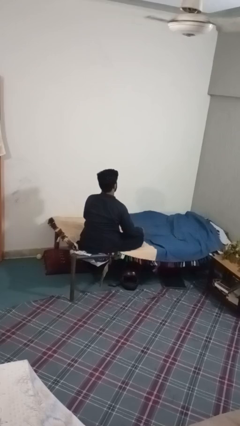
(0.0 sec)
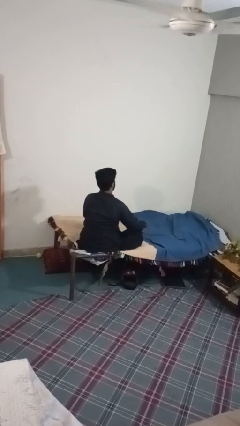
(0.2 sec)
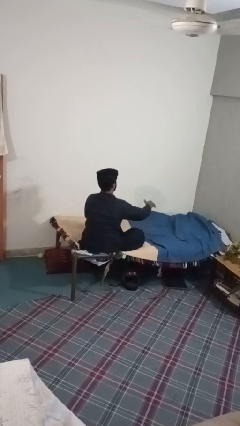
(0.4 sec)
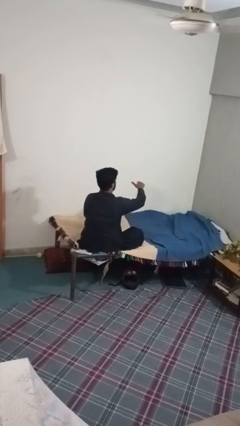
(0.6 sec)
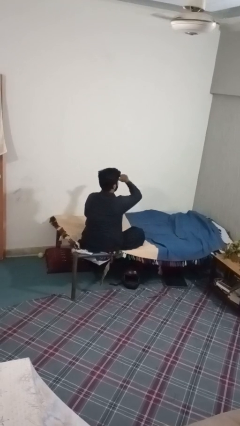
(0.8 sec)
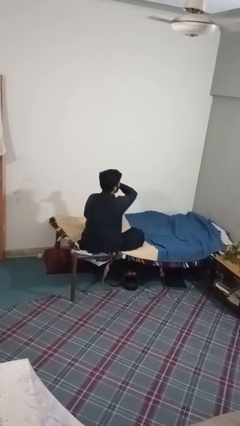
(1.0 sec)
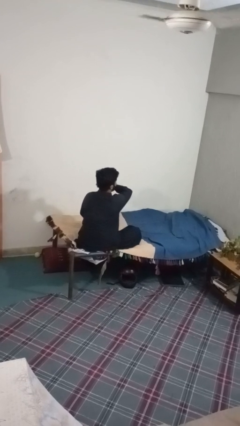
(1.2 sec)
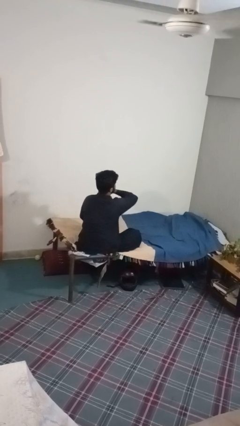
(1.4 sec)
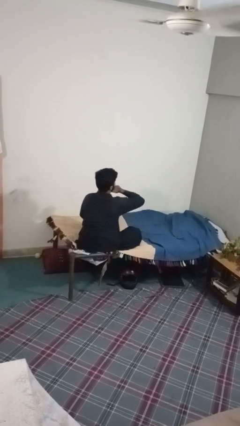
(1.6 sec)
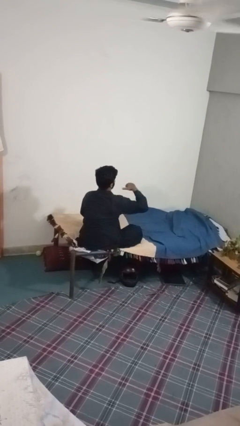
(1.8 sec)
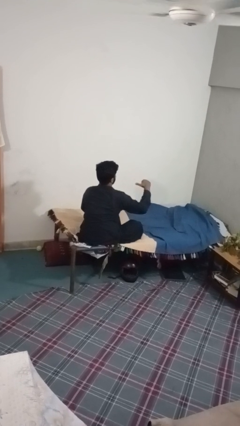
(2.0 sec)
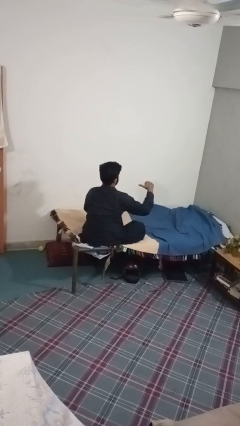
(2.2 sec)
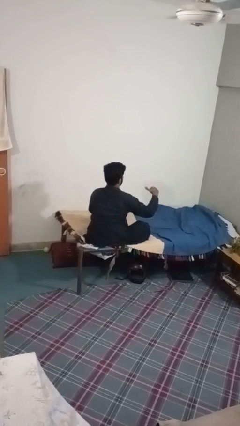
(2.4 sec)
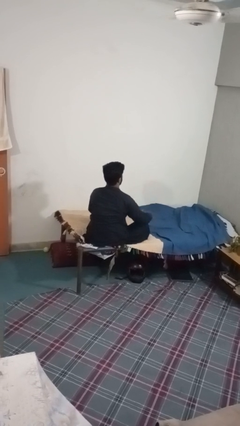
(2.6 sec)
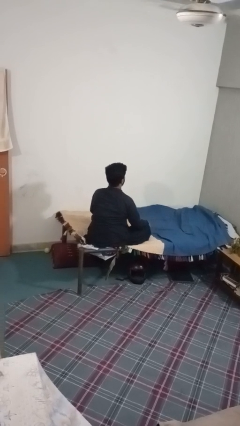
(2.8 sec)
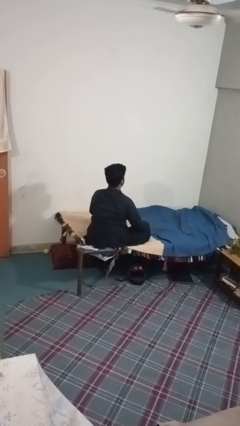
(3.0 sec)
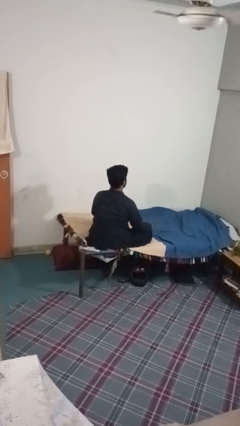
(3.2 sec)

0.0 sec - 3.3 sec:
person gestures cut

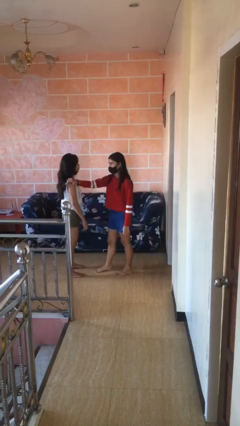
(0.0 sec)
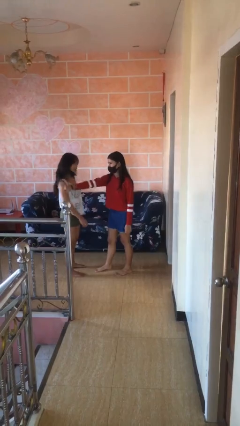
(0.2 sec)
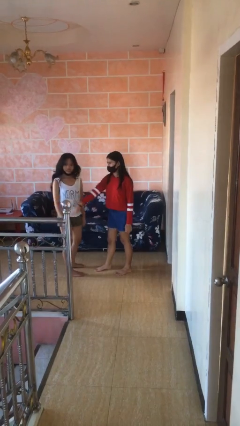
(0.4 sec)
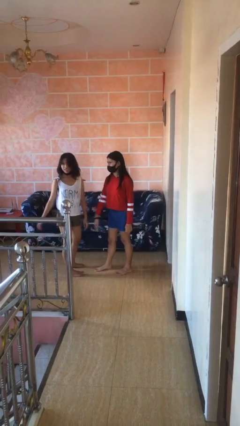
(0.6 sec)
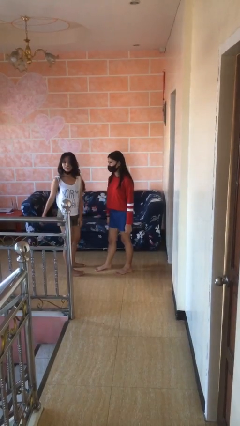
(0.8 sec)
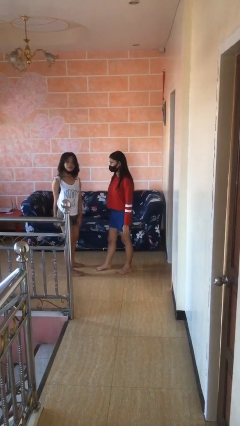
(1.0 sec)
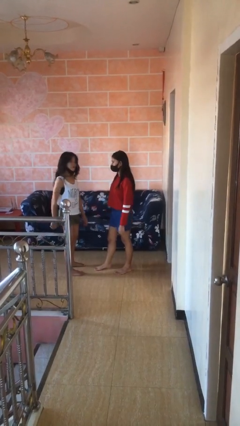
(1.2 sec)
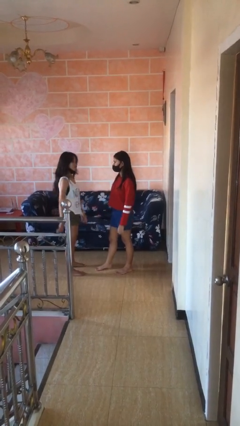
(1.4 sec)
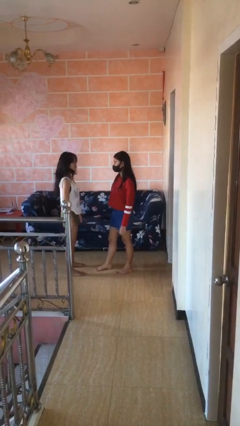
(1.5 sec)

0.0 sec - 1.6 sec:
person shoves person

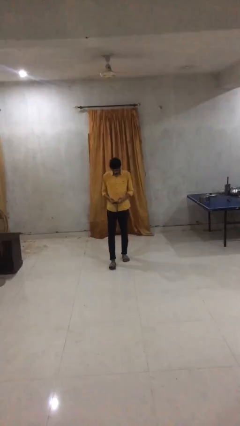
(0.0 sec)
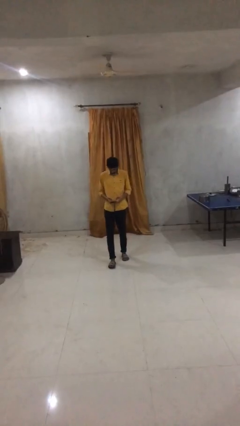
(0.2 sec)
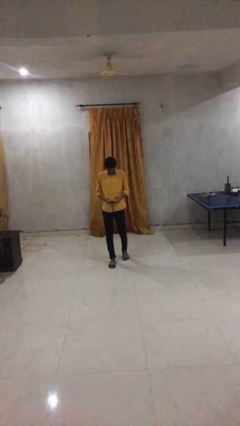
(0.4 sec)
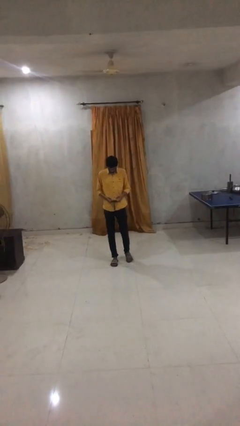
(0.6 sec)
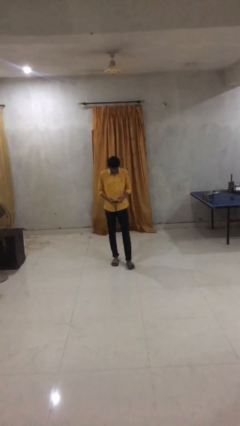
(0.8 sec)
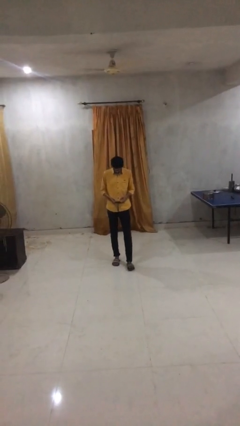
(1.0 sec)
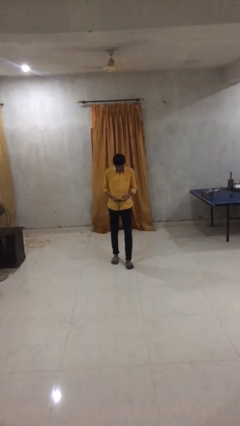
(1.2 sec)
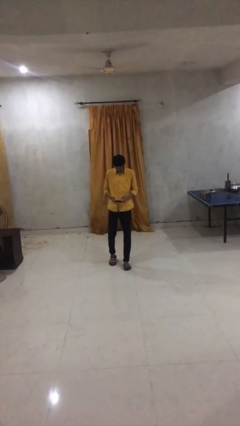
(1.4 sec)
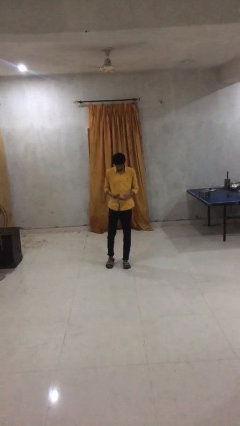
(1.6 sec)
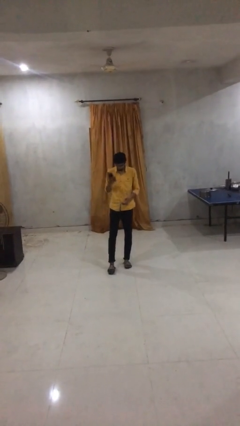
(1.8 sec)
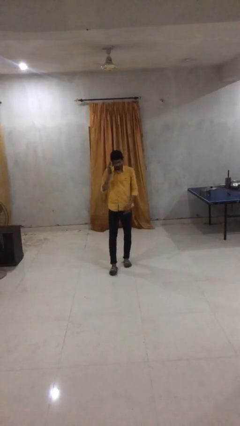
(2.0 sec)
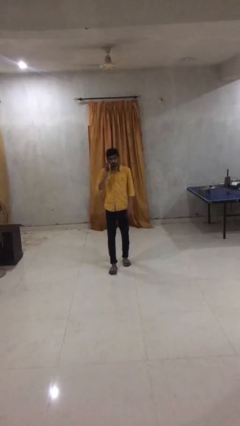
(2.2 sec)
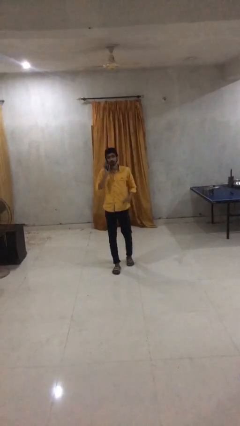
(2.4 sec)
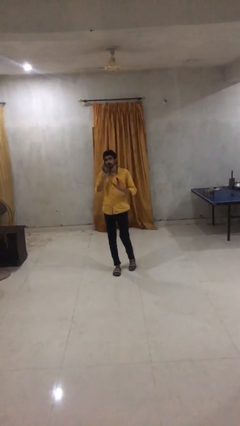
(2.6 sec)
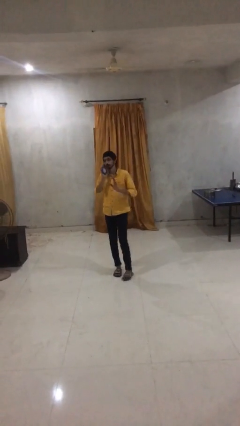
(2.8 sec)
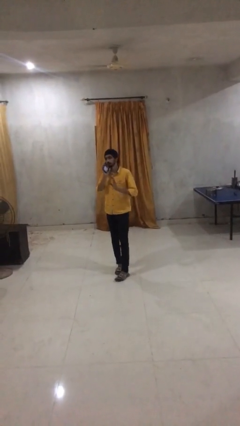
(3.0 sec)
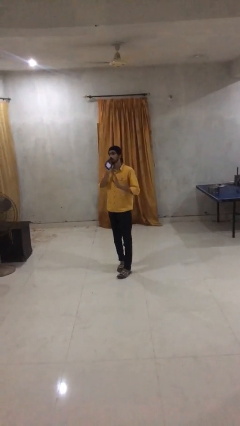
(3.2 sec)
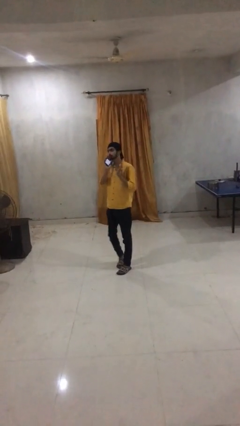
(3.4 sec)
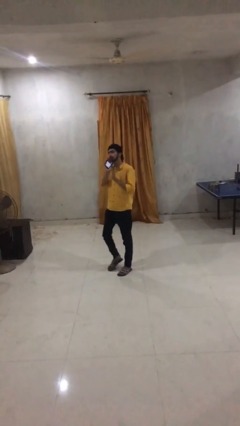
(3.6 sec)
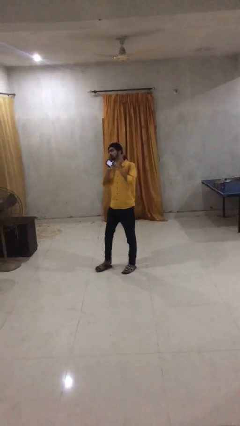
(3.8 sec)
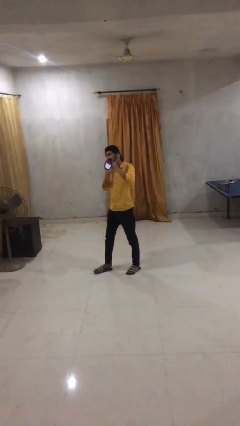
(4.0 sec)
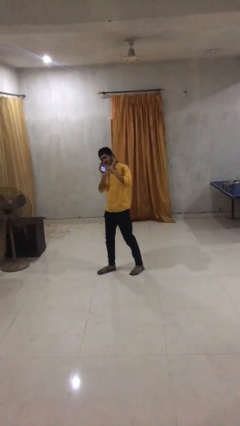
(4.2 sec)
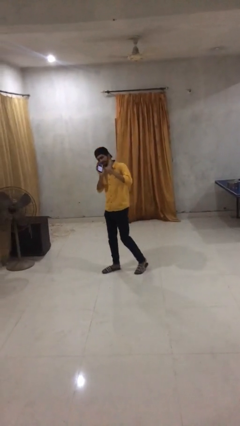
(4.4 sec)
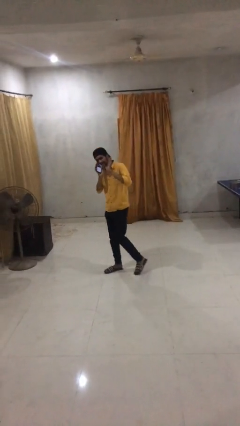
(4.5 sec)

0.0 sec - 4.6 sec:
person talks on phone

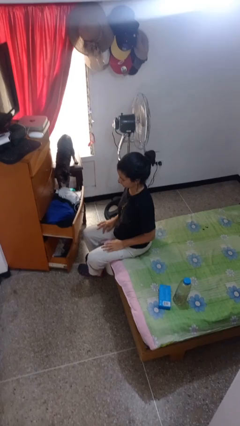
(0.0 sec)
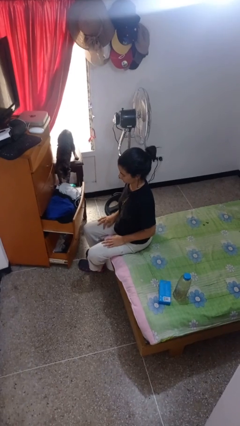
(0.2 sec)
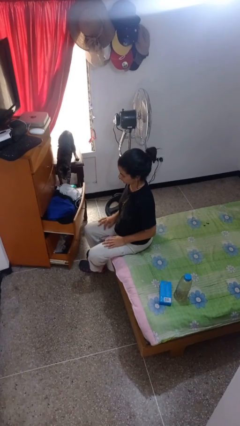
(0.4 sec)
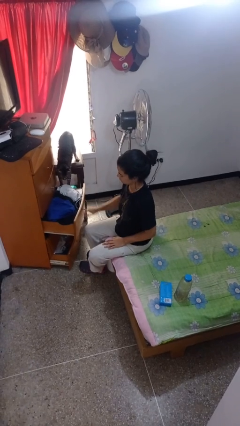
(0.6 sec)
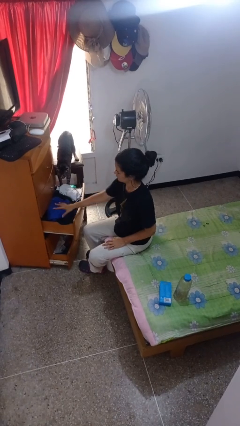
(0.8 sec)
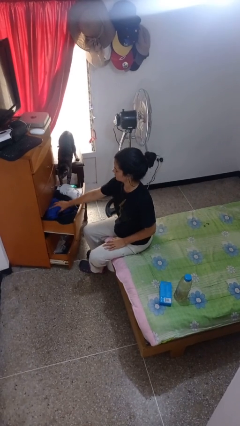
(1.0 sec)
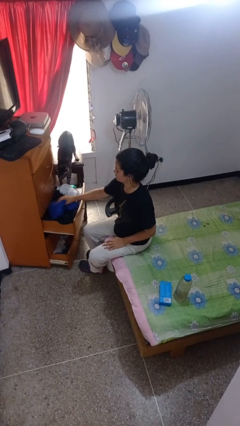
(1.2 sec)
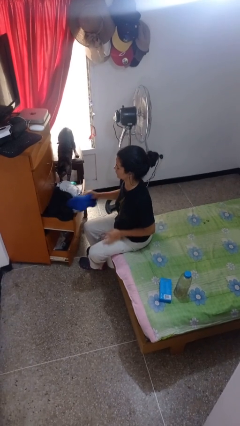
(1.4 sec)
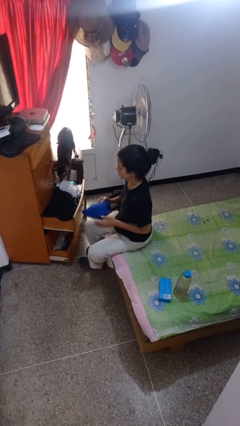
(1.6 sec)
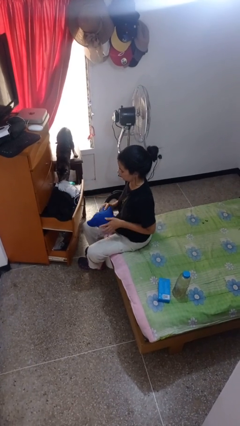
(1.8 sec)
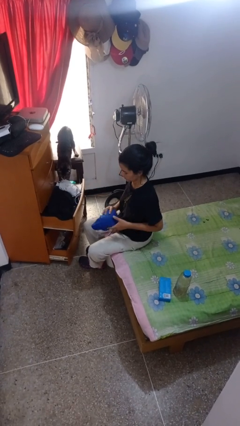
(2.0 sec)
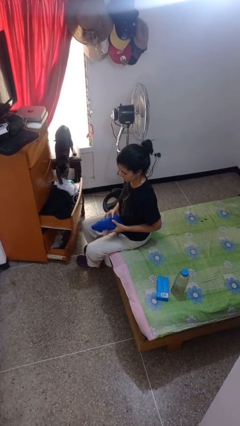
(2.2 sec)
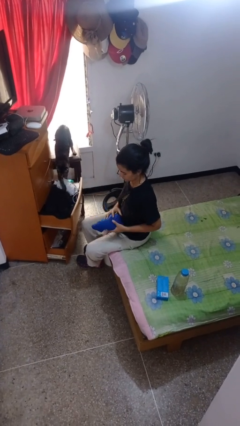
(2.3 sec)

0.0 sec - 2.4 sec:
person takes clothes from dresser

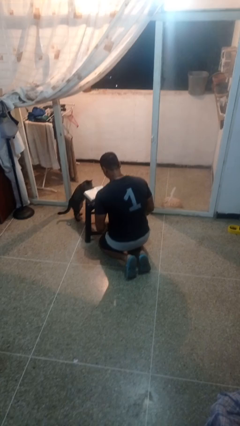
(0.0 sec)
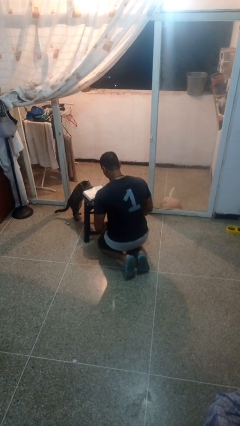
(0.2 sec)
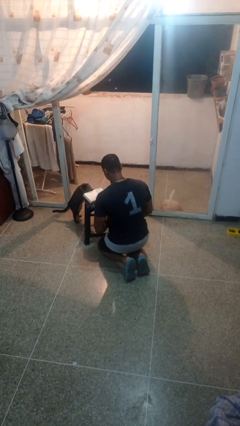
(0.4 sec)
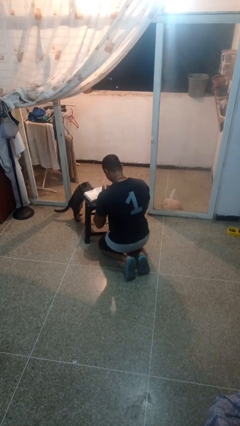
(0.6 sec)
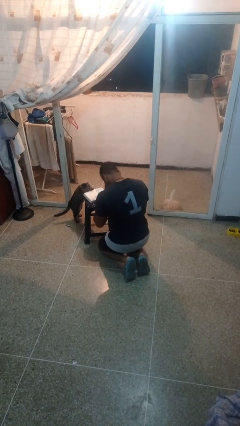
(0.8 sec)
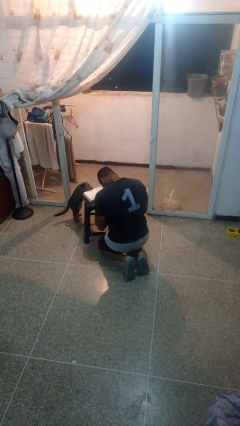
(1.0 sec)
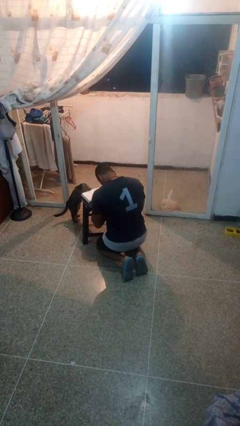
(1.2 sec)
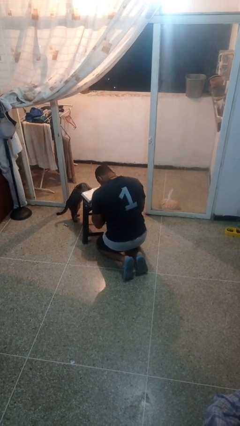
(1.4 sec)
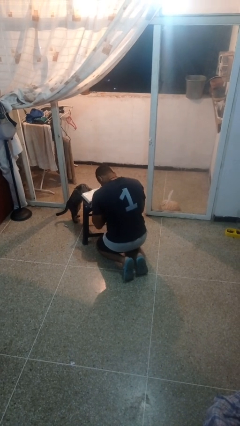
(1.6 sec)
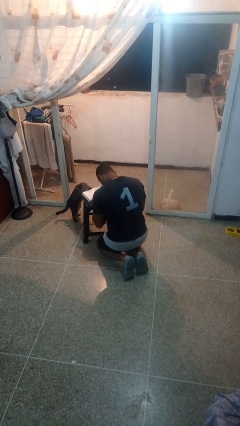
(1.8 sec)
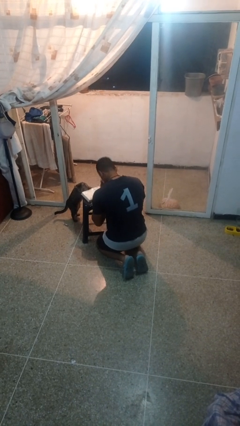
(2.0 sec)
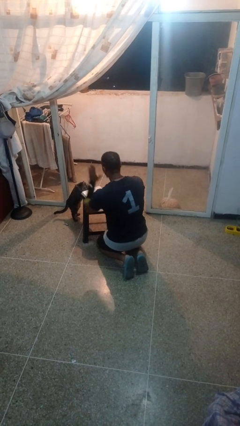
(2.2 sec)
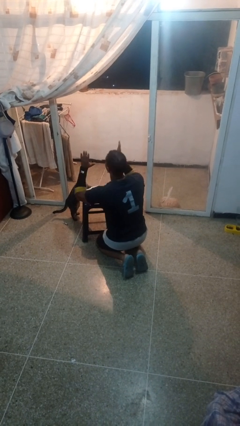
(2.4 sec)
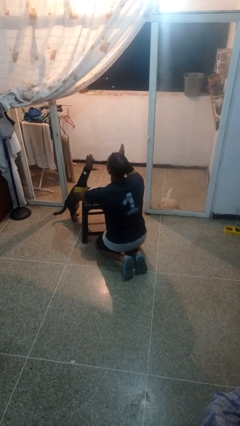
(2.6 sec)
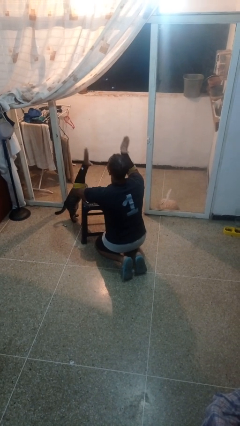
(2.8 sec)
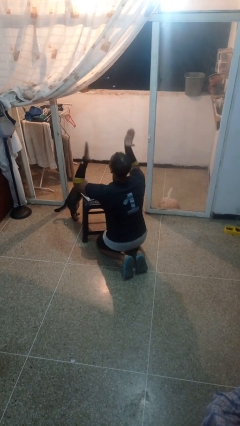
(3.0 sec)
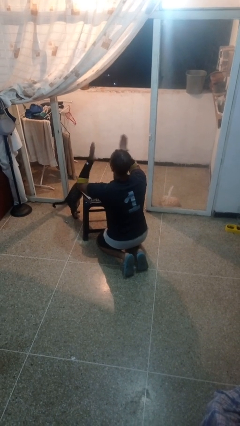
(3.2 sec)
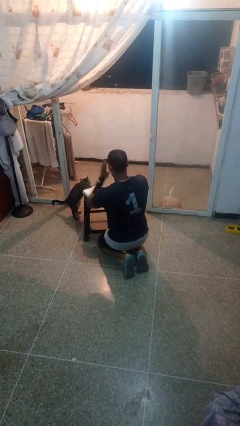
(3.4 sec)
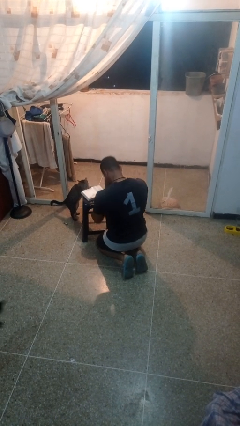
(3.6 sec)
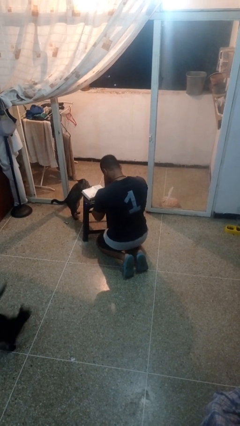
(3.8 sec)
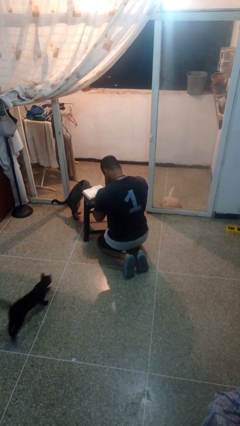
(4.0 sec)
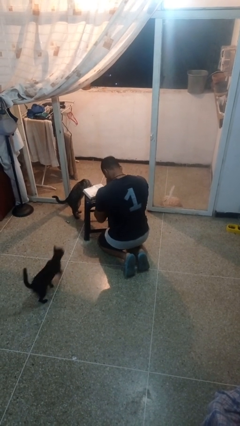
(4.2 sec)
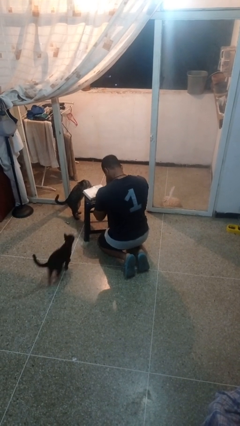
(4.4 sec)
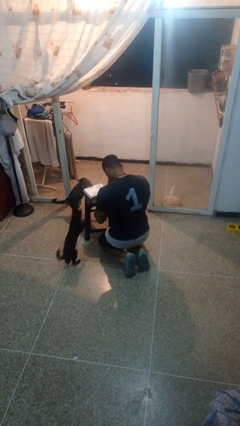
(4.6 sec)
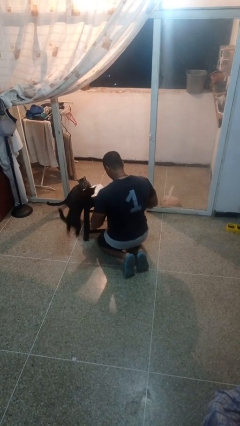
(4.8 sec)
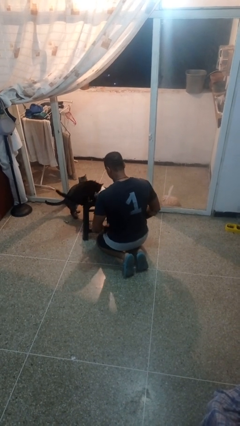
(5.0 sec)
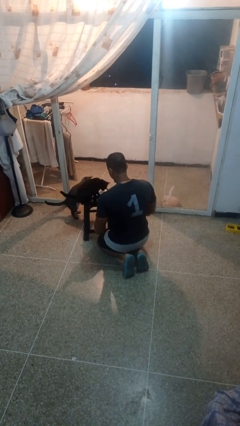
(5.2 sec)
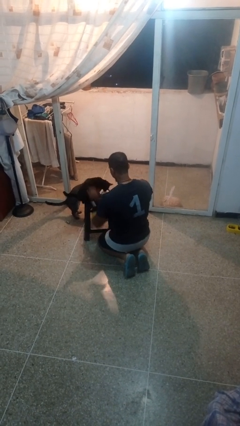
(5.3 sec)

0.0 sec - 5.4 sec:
person prays

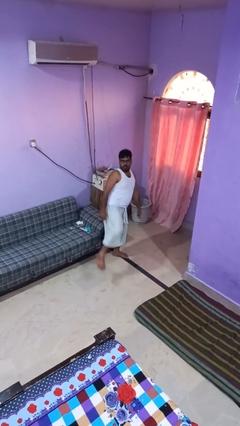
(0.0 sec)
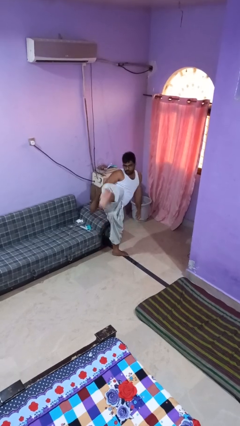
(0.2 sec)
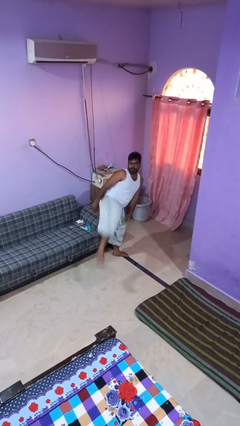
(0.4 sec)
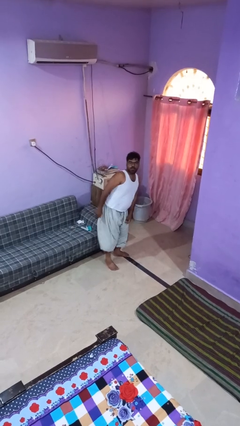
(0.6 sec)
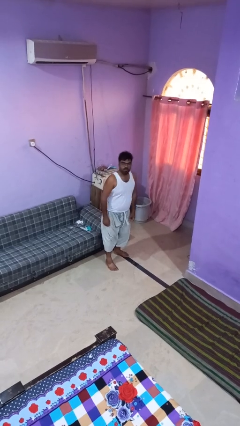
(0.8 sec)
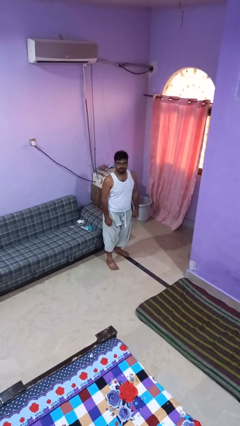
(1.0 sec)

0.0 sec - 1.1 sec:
person karate kicks
